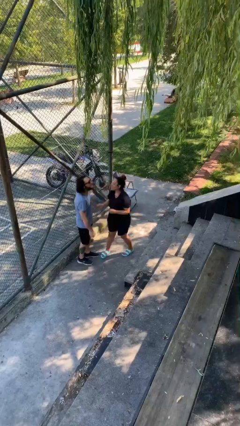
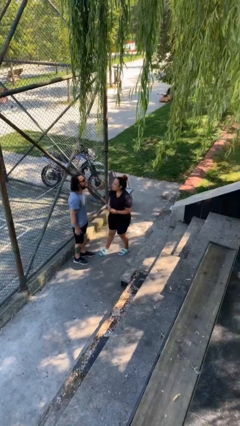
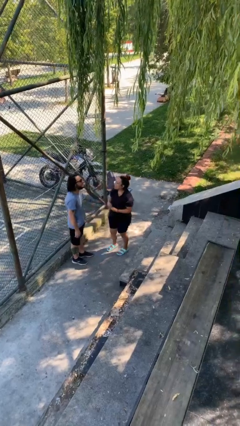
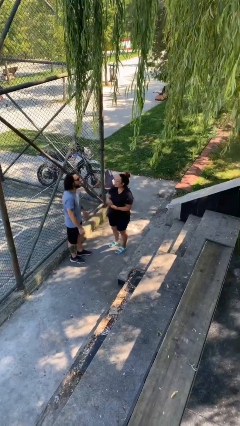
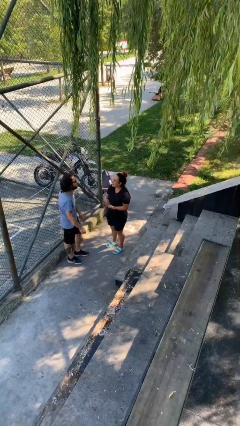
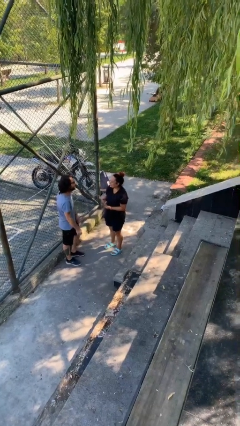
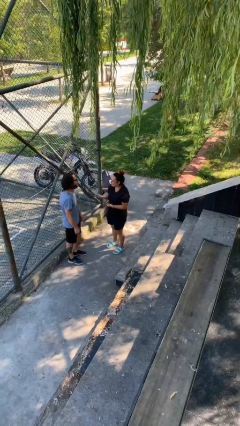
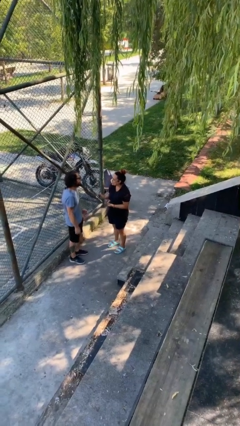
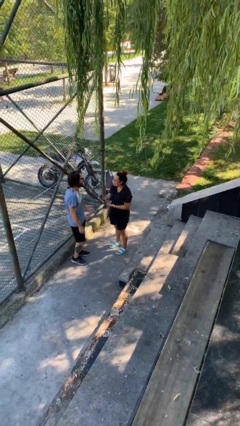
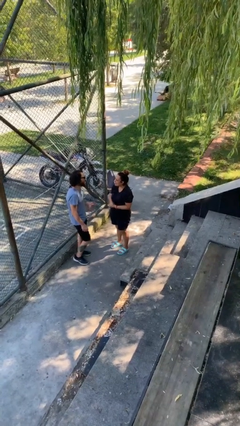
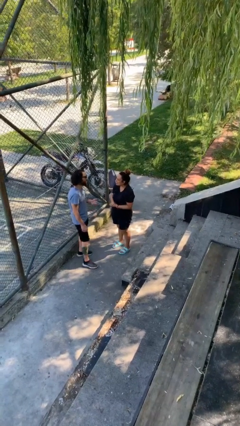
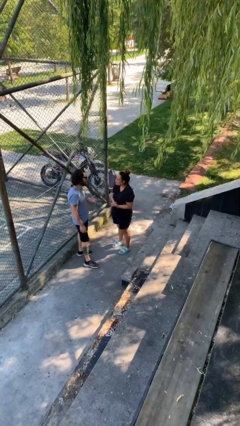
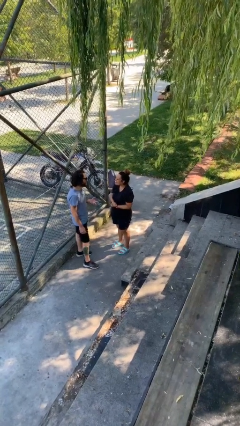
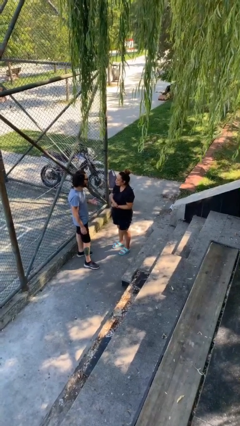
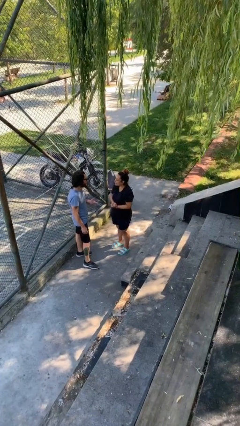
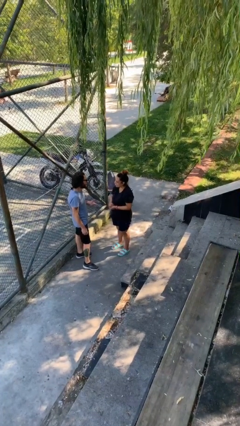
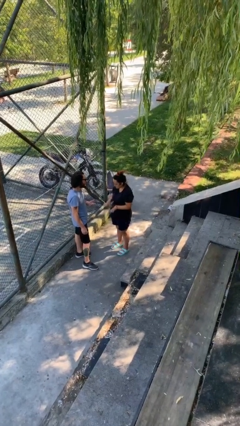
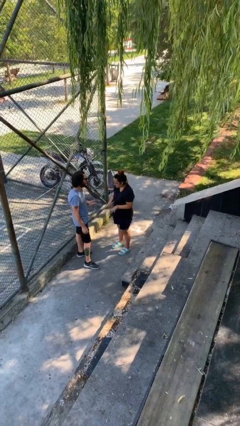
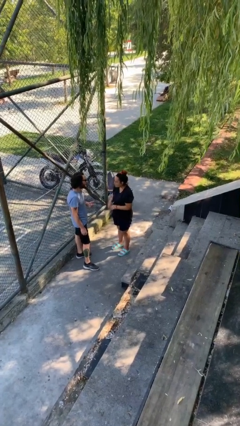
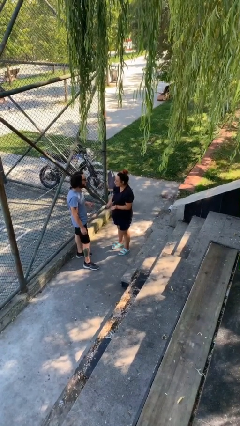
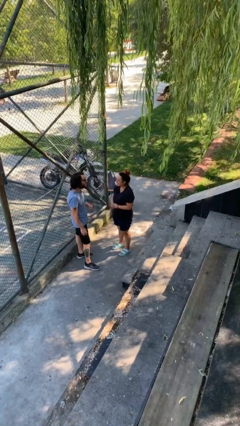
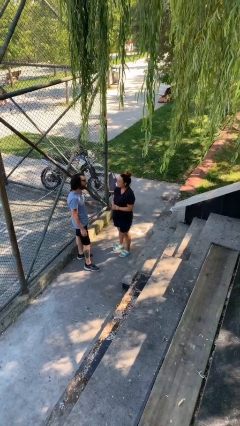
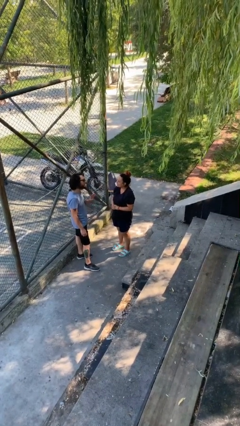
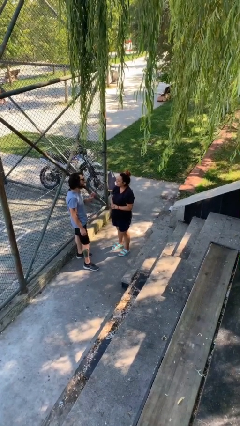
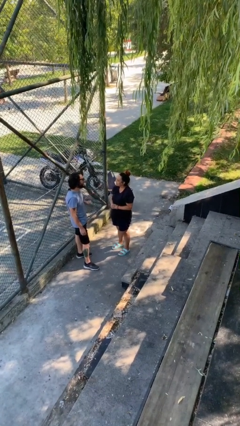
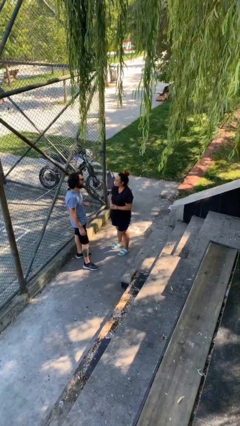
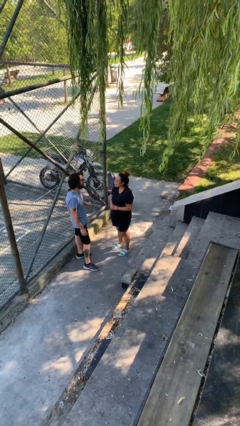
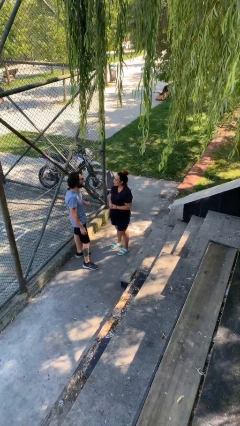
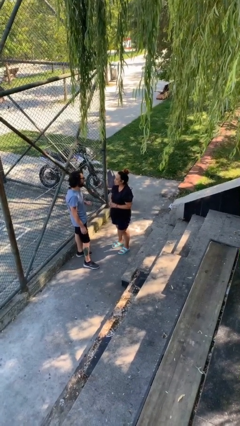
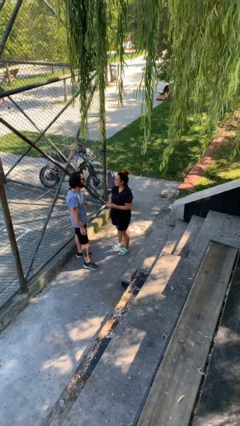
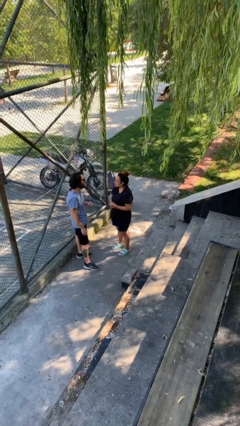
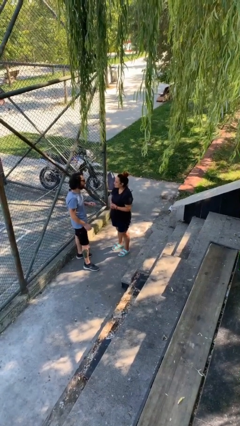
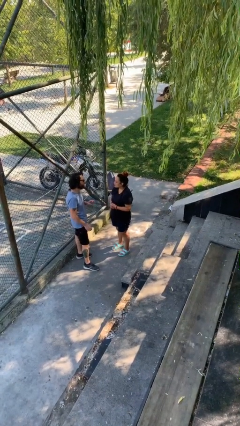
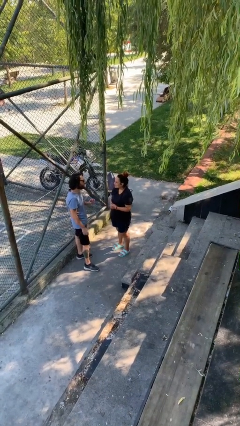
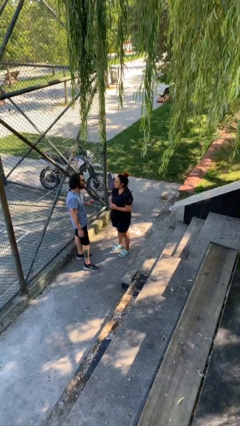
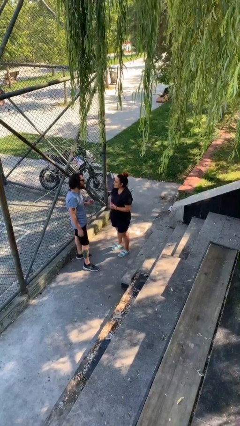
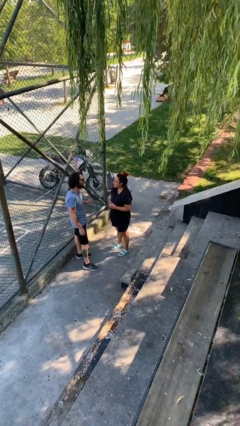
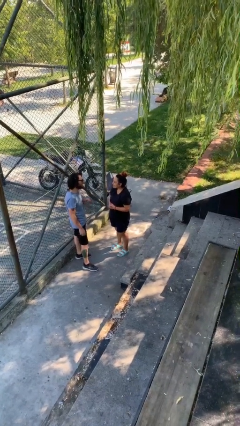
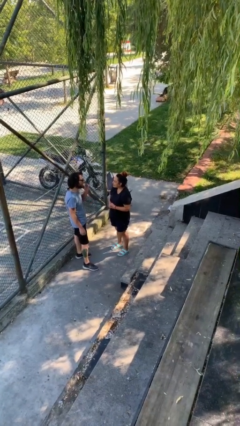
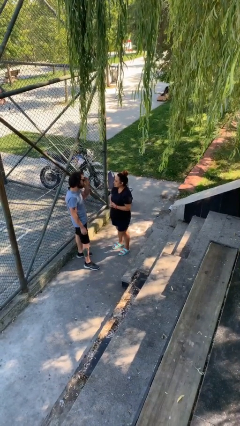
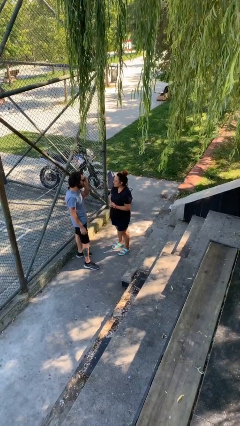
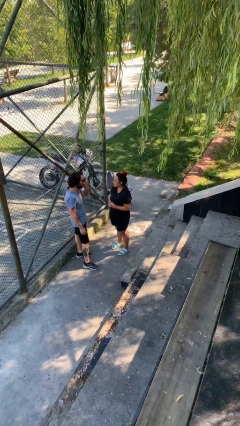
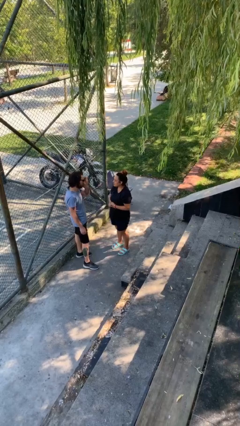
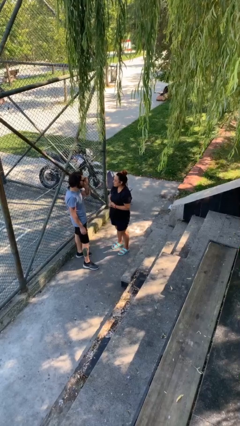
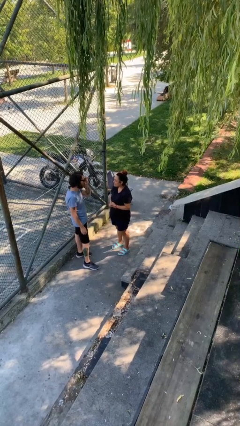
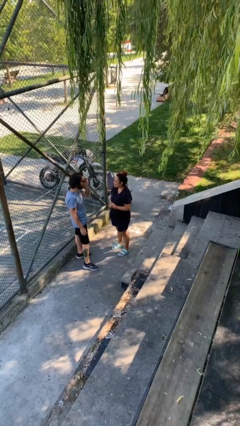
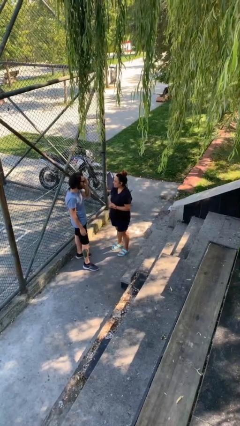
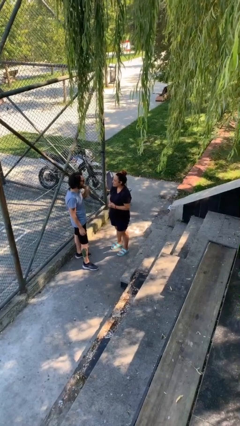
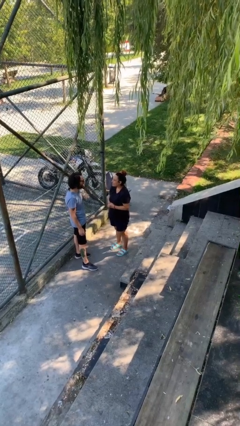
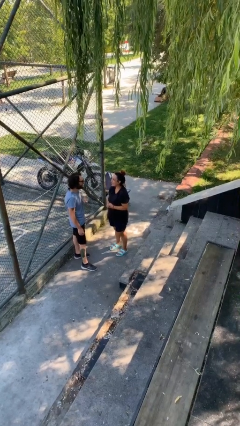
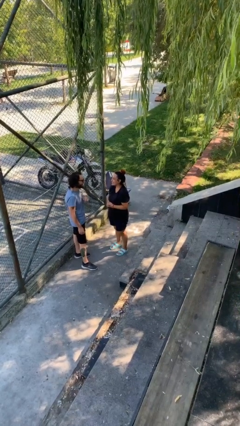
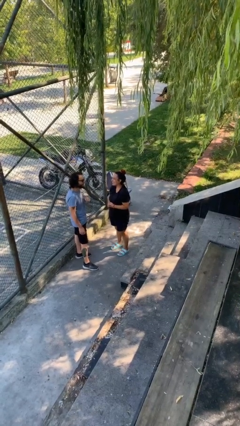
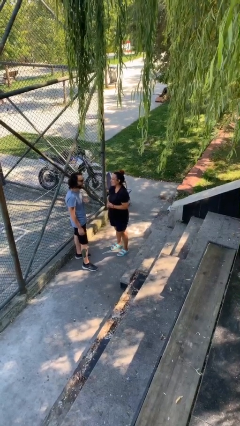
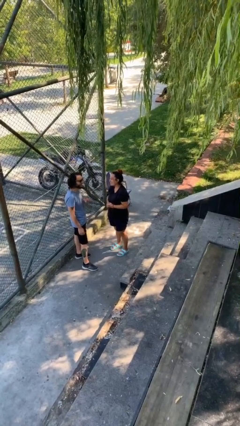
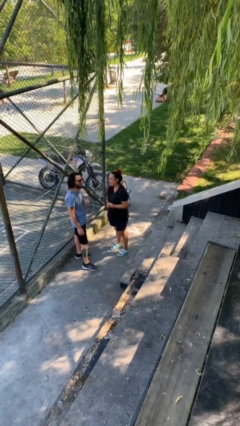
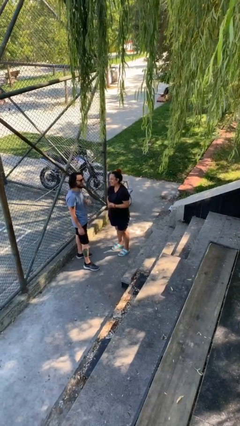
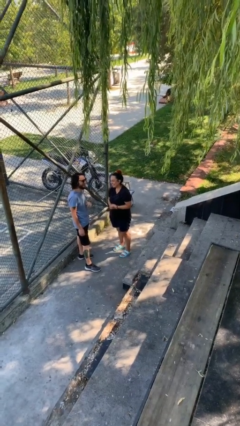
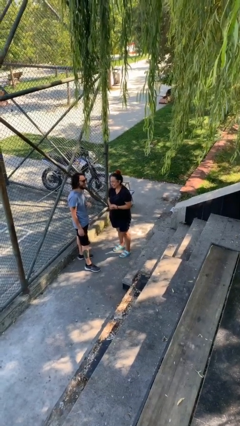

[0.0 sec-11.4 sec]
person talks to person

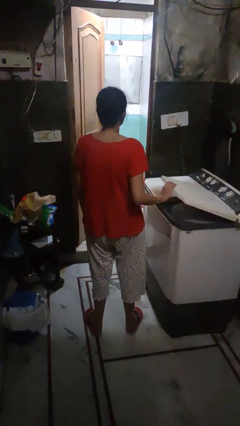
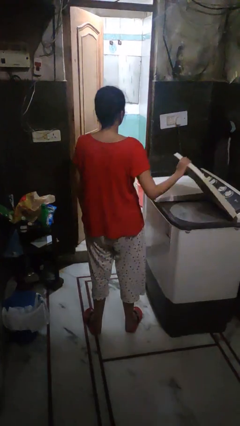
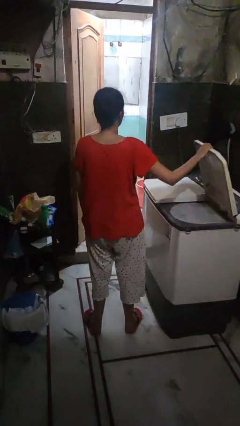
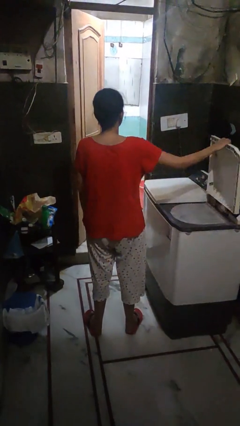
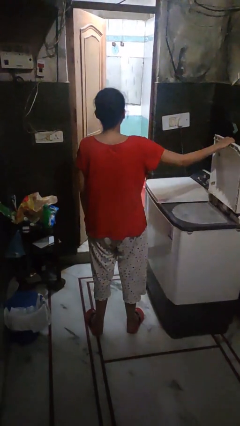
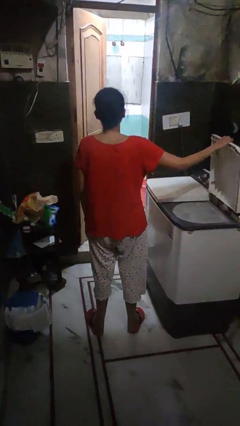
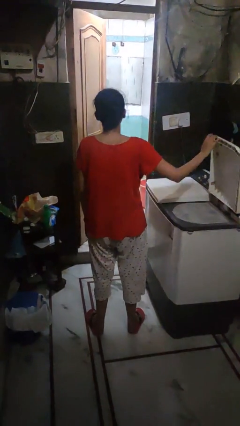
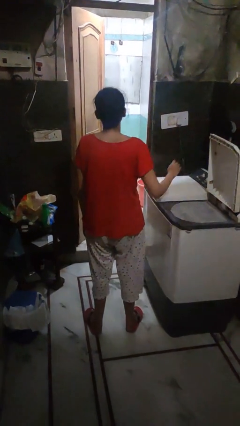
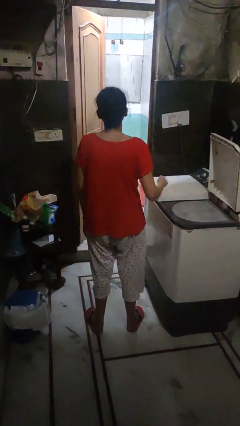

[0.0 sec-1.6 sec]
person opens clothes washer

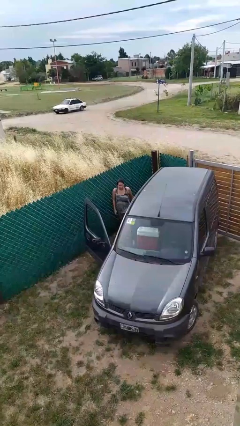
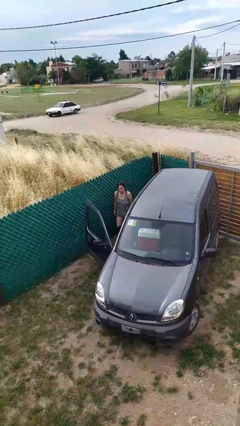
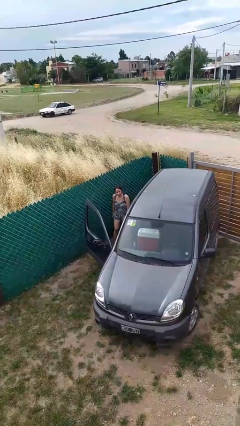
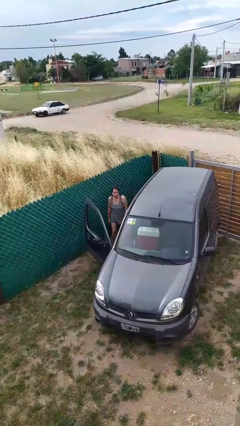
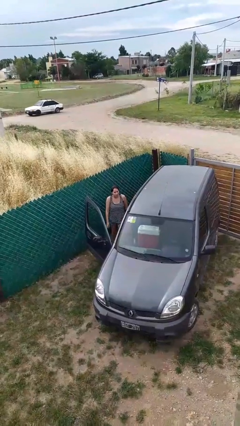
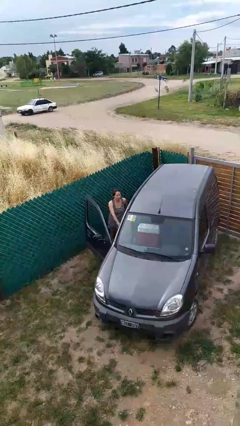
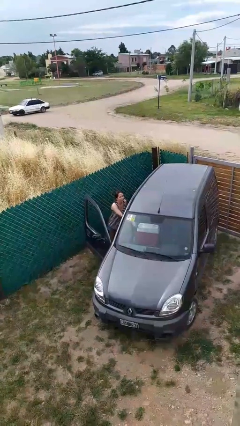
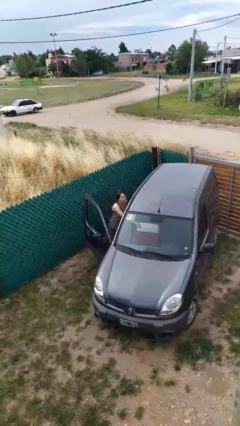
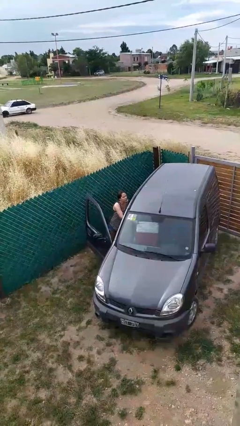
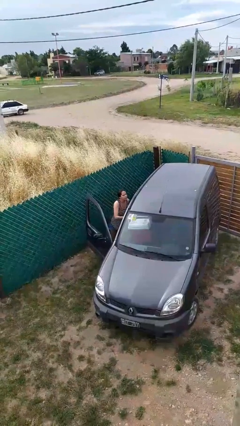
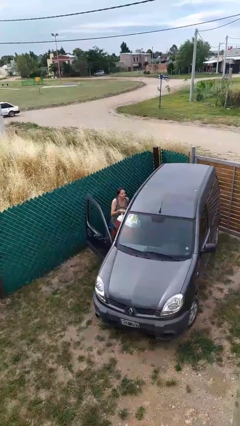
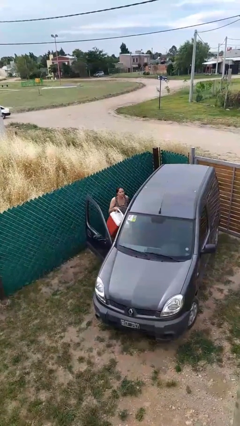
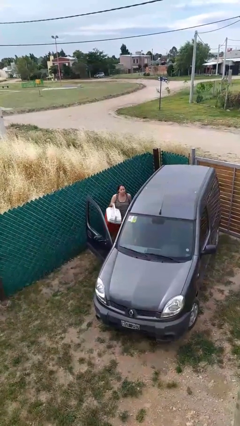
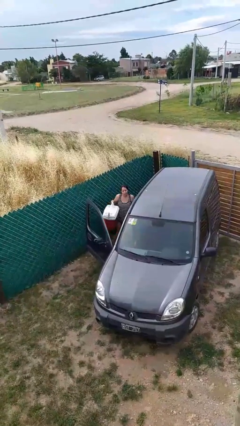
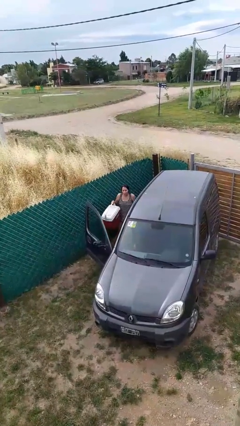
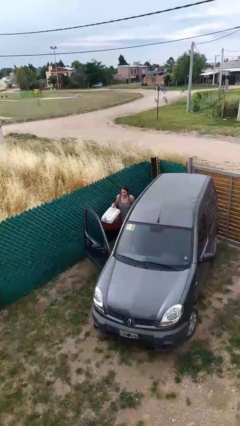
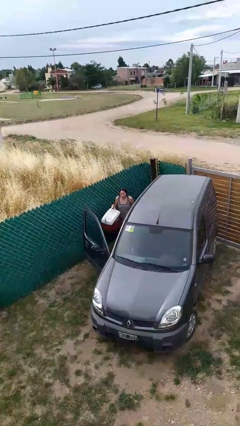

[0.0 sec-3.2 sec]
person unloads car

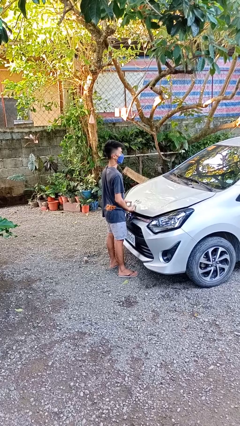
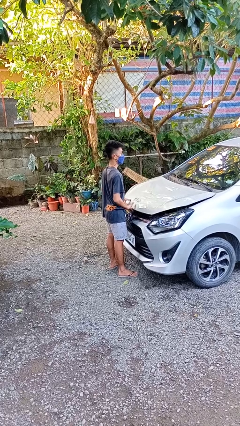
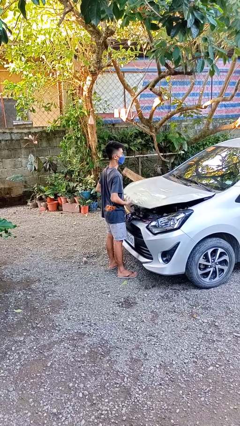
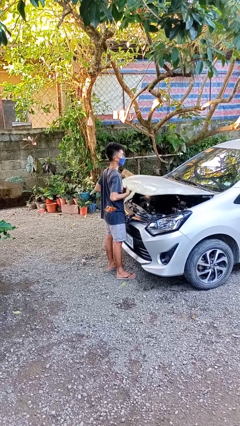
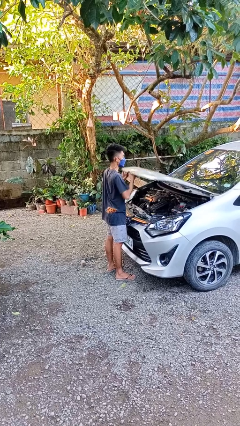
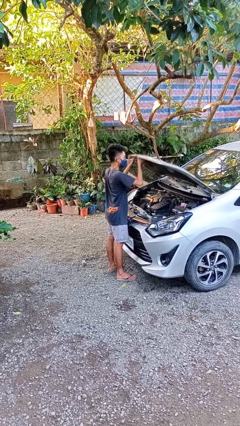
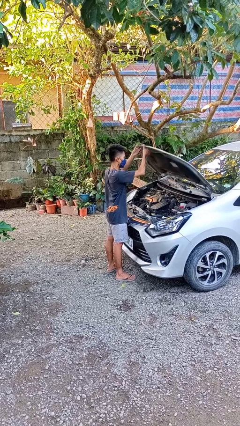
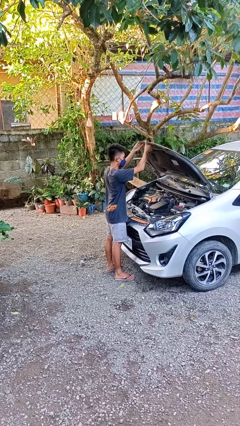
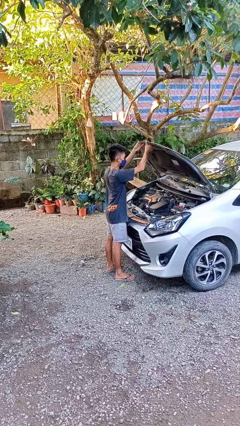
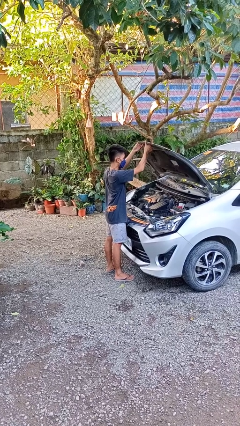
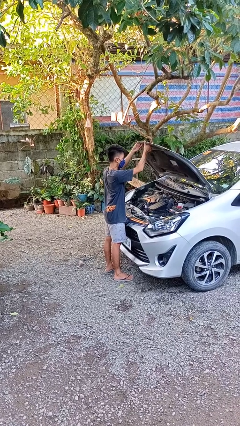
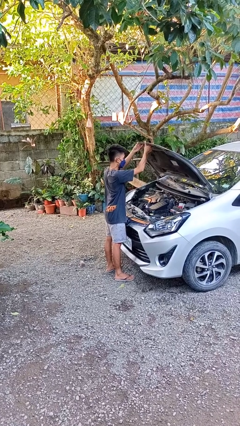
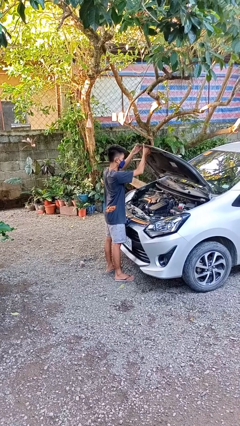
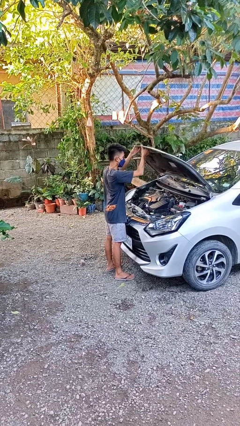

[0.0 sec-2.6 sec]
person opens car hood
